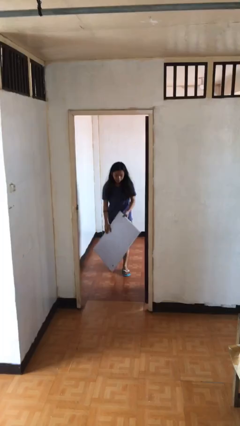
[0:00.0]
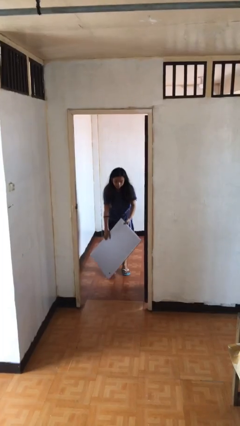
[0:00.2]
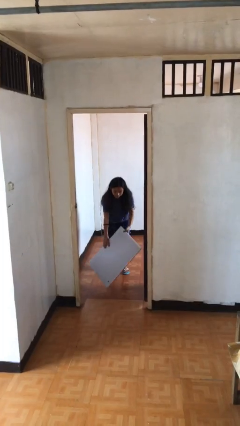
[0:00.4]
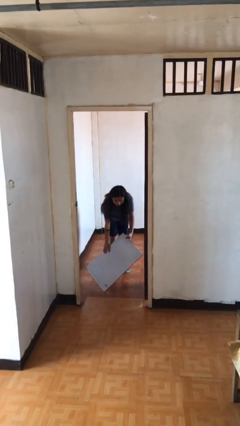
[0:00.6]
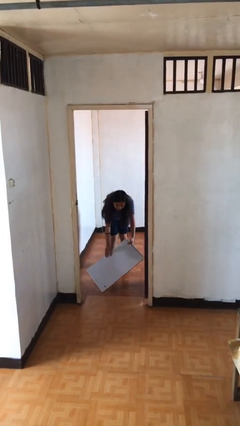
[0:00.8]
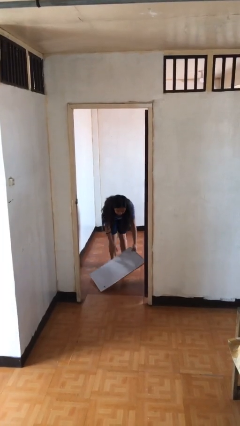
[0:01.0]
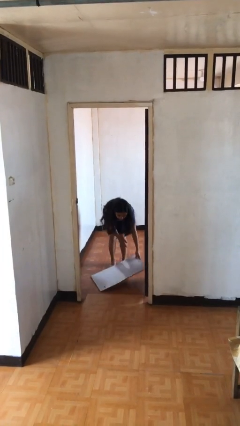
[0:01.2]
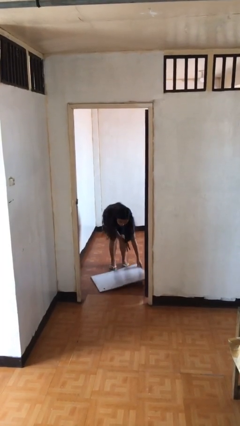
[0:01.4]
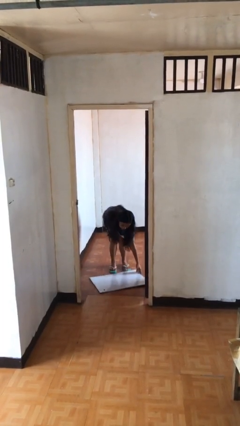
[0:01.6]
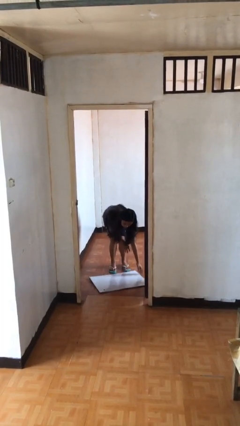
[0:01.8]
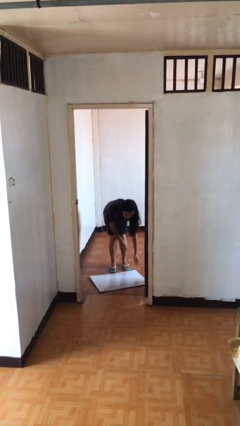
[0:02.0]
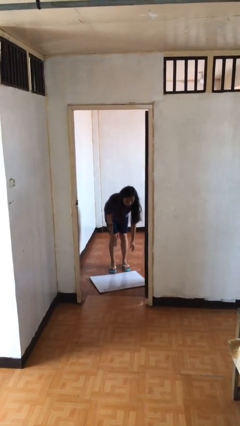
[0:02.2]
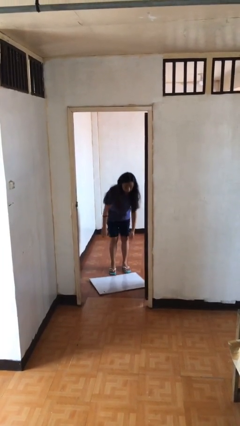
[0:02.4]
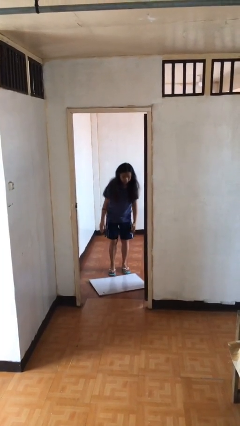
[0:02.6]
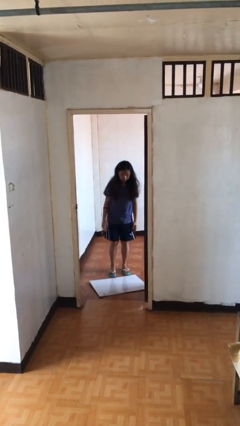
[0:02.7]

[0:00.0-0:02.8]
person puts down object on floor

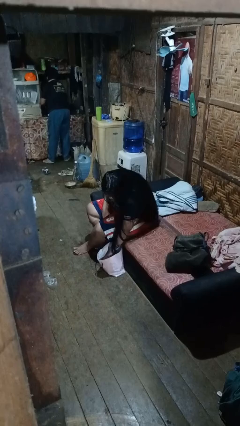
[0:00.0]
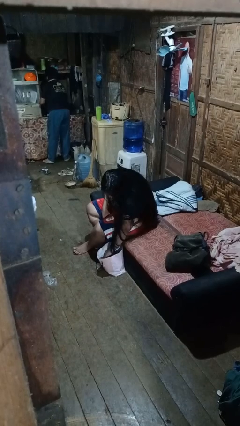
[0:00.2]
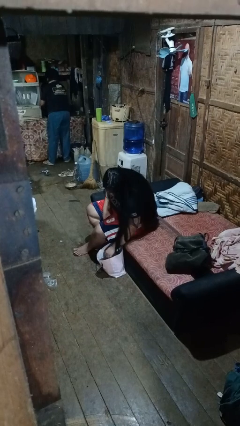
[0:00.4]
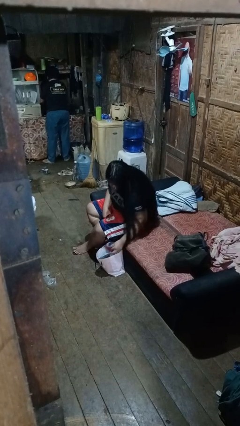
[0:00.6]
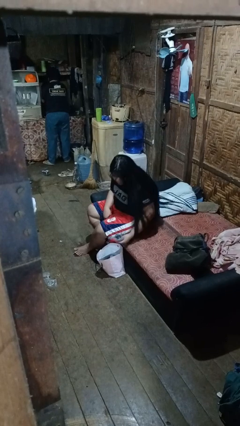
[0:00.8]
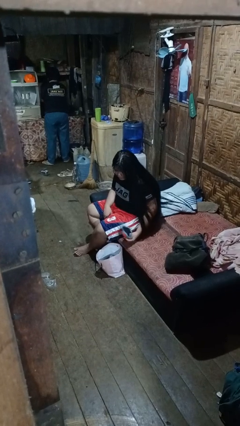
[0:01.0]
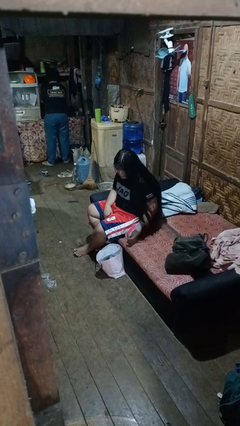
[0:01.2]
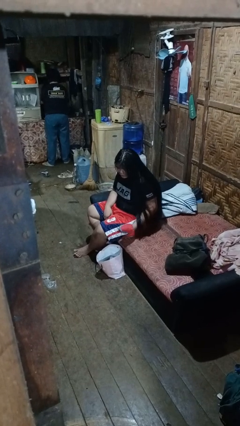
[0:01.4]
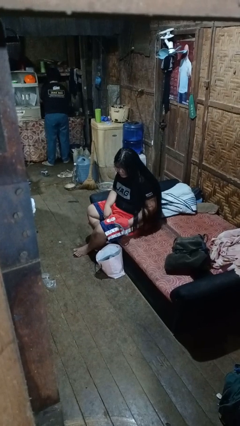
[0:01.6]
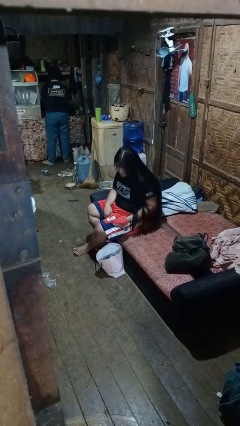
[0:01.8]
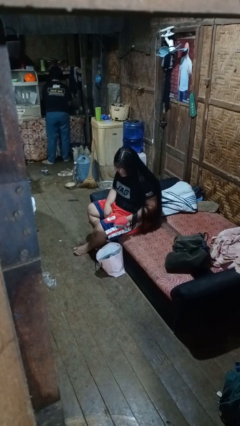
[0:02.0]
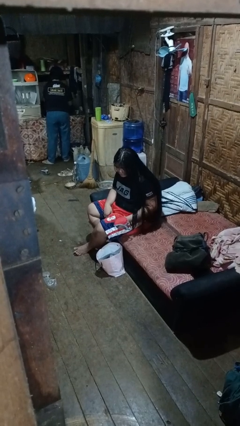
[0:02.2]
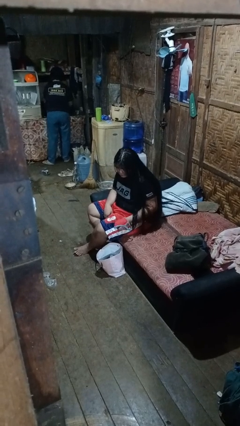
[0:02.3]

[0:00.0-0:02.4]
person takes object from bag

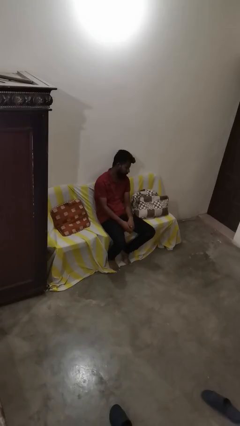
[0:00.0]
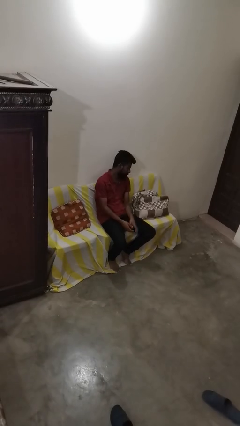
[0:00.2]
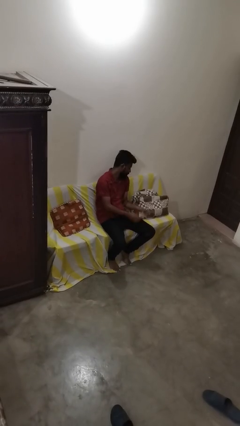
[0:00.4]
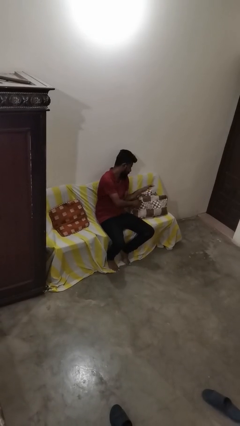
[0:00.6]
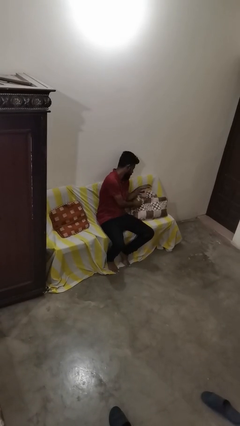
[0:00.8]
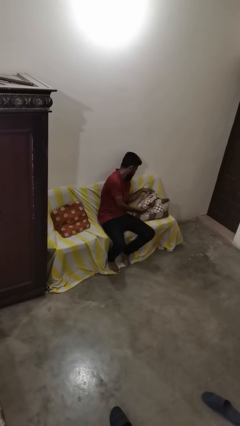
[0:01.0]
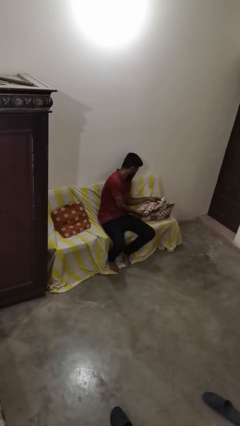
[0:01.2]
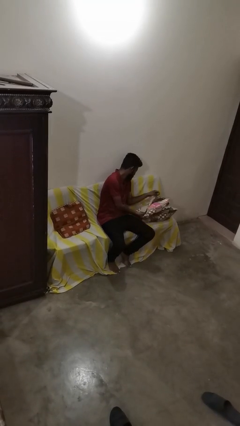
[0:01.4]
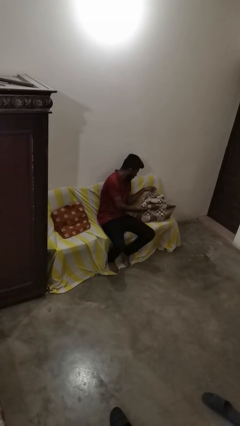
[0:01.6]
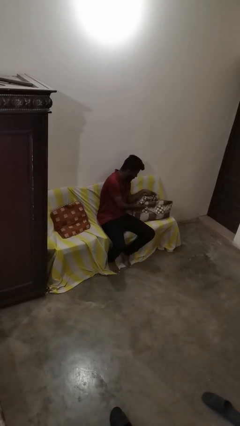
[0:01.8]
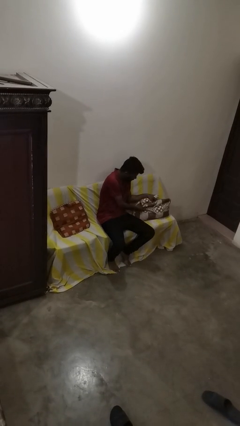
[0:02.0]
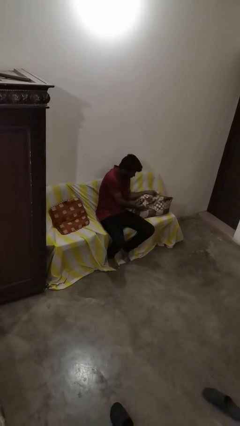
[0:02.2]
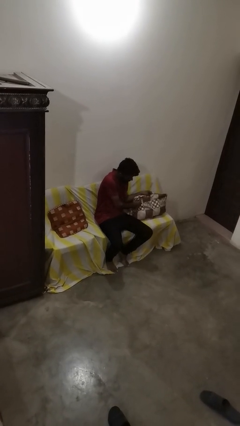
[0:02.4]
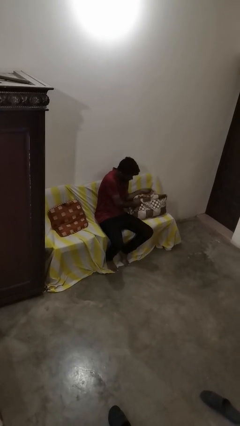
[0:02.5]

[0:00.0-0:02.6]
person searches in couch

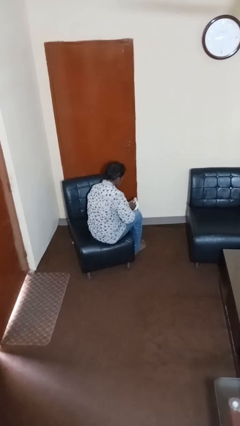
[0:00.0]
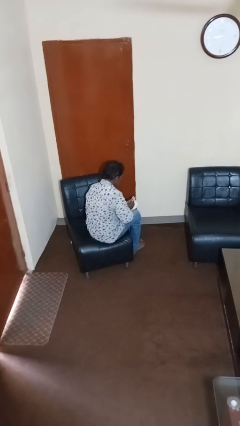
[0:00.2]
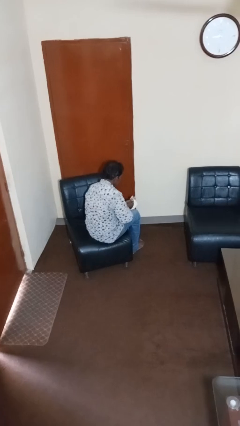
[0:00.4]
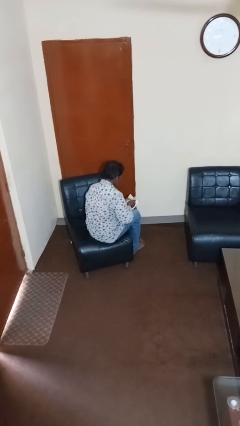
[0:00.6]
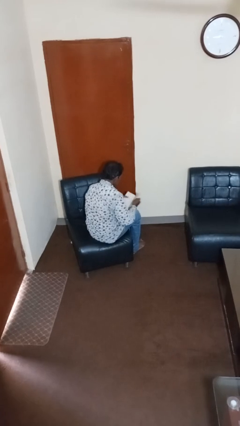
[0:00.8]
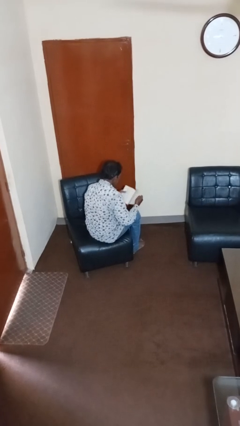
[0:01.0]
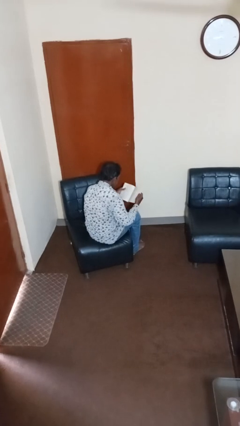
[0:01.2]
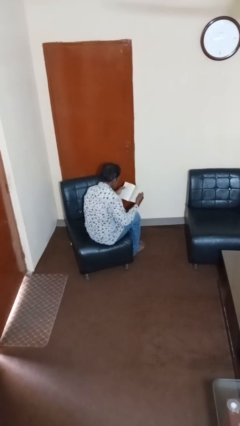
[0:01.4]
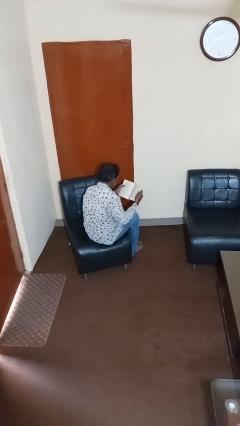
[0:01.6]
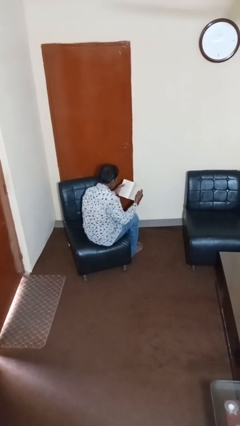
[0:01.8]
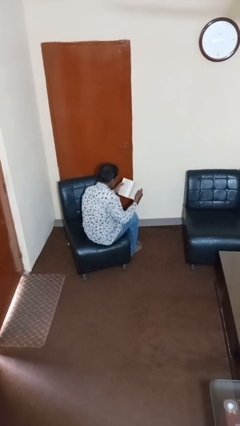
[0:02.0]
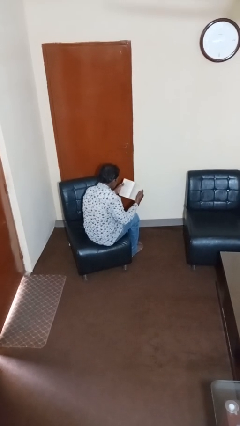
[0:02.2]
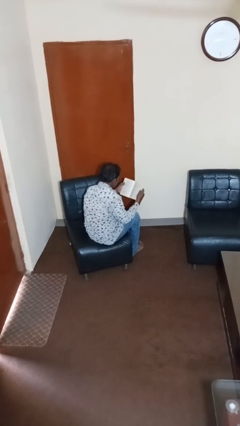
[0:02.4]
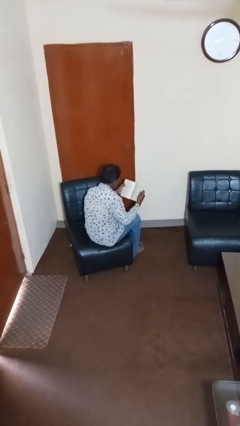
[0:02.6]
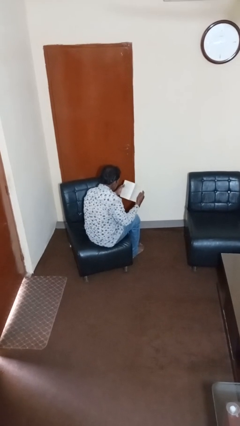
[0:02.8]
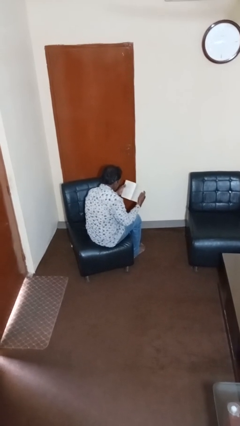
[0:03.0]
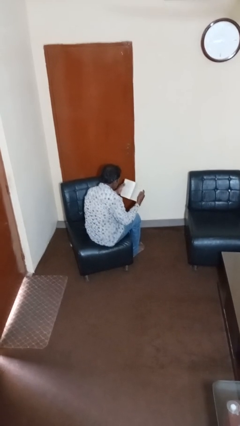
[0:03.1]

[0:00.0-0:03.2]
person reads book

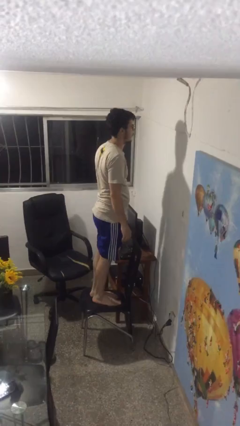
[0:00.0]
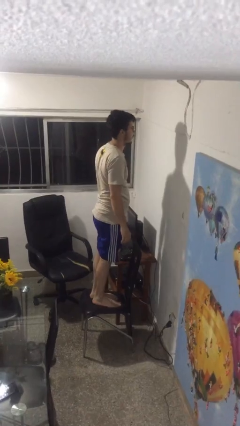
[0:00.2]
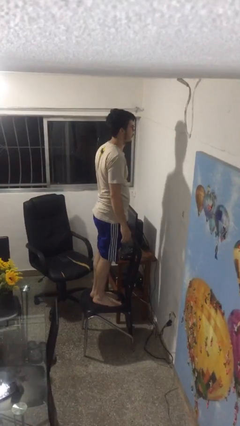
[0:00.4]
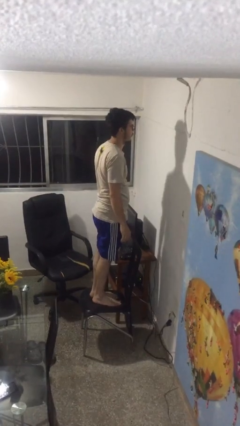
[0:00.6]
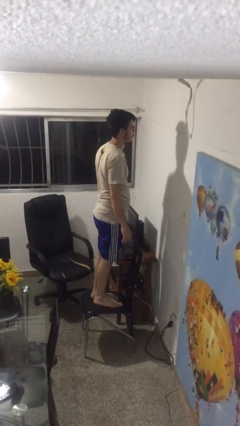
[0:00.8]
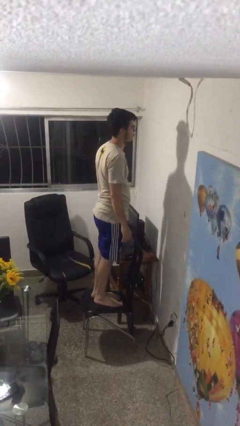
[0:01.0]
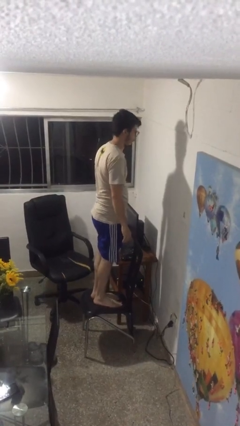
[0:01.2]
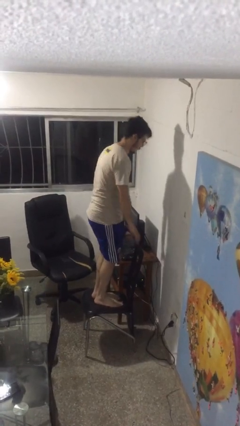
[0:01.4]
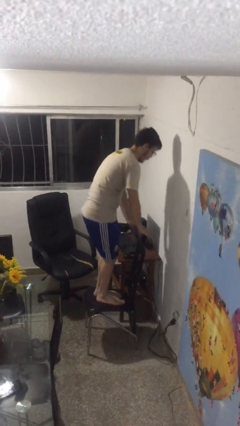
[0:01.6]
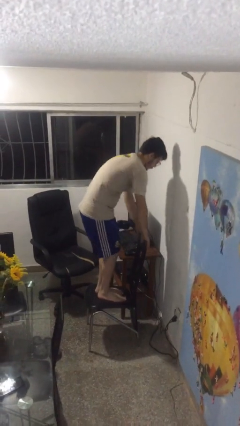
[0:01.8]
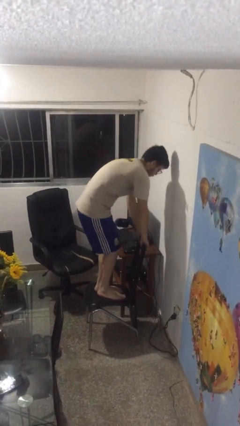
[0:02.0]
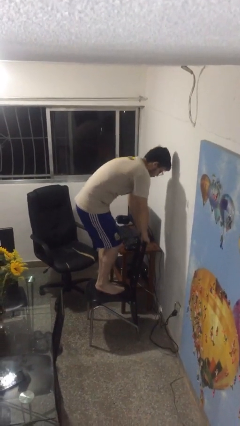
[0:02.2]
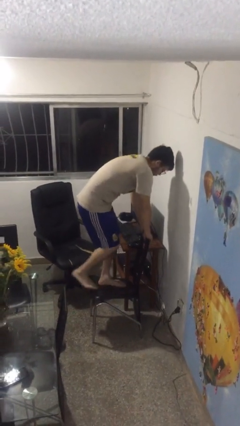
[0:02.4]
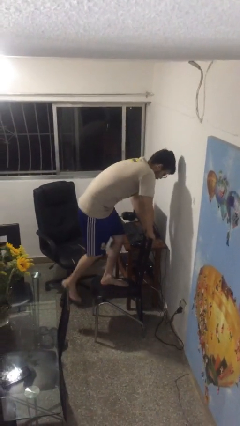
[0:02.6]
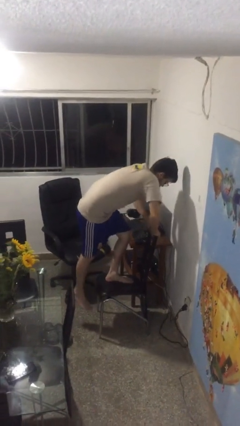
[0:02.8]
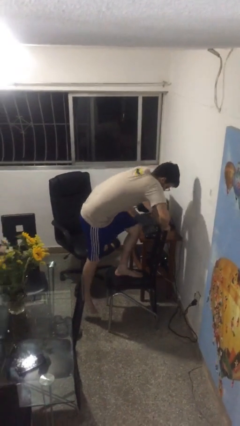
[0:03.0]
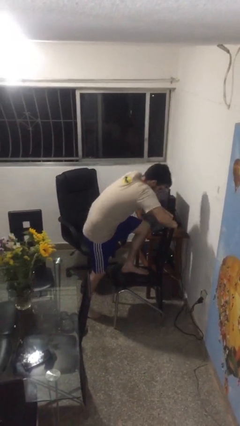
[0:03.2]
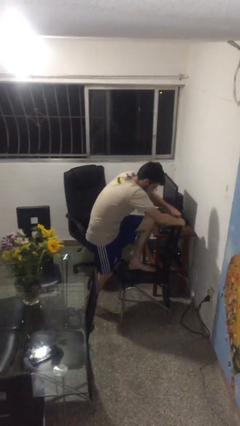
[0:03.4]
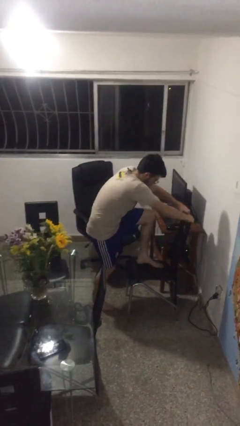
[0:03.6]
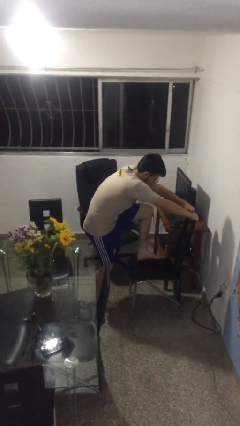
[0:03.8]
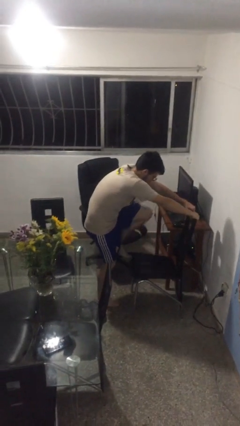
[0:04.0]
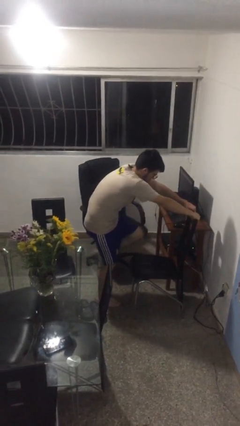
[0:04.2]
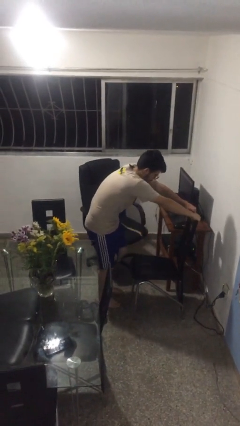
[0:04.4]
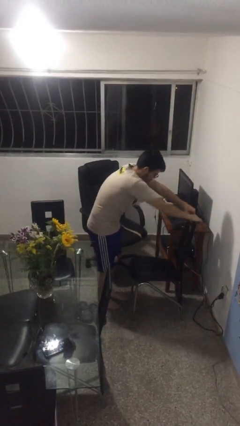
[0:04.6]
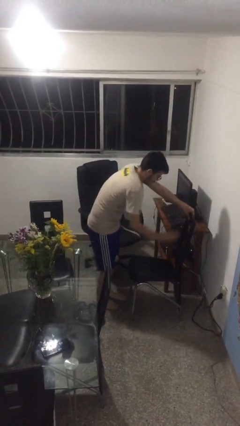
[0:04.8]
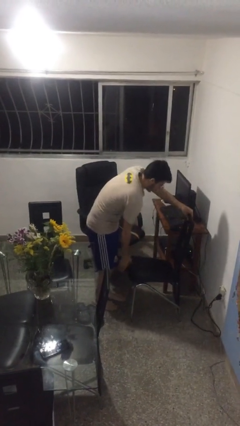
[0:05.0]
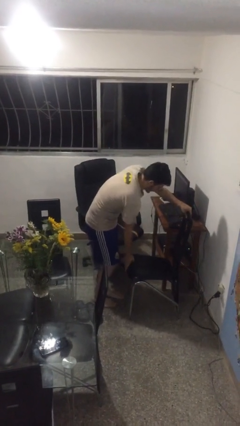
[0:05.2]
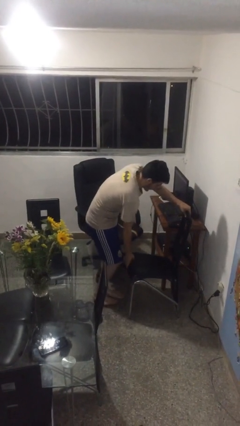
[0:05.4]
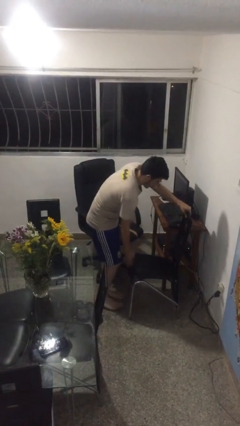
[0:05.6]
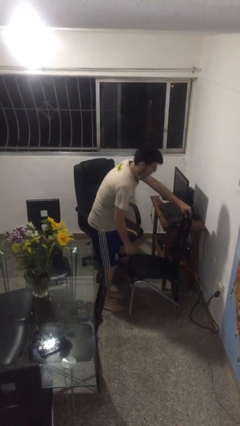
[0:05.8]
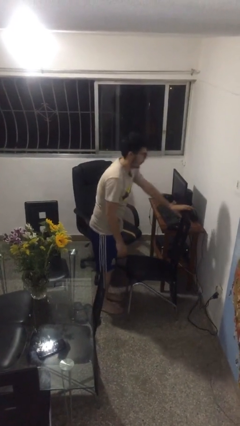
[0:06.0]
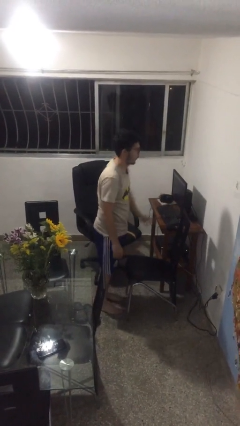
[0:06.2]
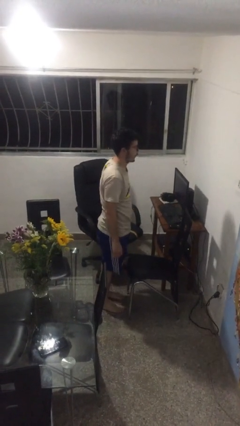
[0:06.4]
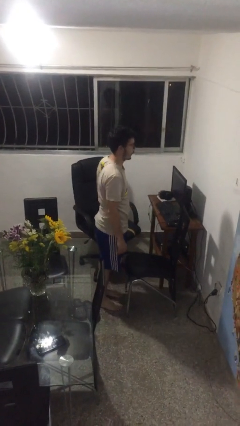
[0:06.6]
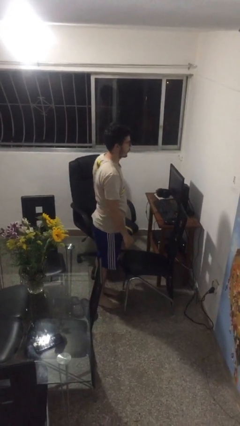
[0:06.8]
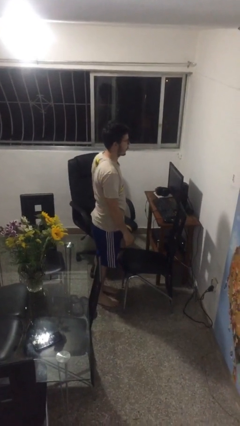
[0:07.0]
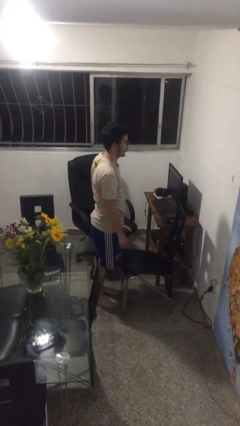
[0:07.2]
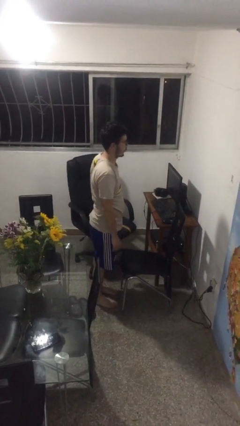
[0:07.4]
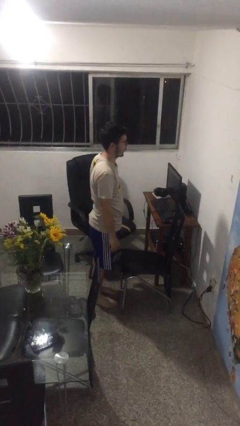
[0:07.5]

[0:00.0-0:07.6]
person climbs off chair
